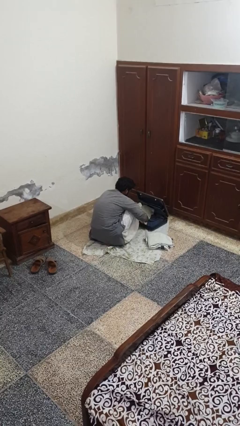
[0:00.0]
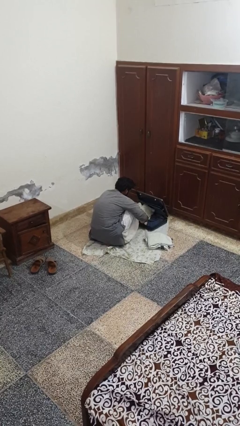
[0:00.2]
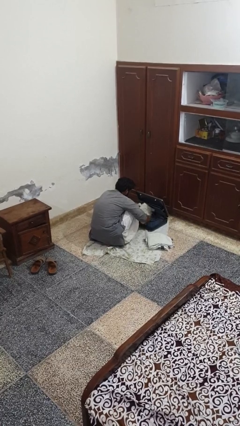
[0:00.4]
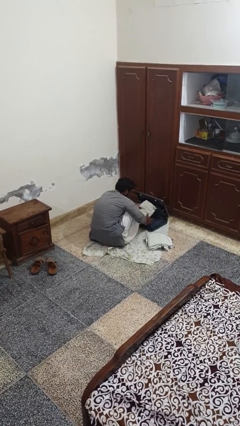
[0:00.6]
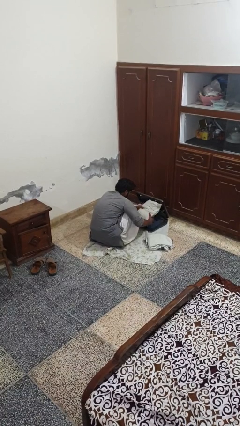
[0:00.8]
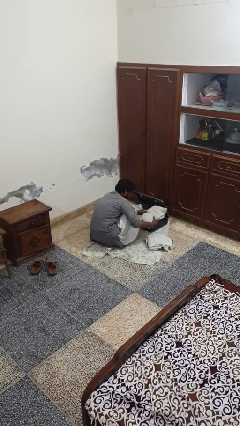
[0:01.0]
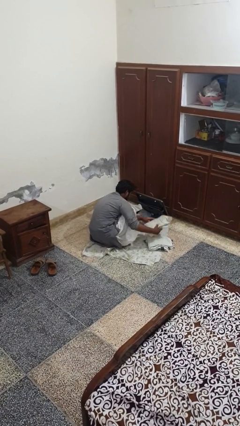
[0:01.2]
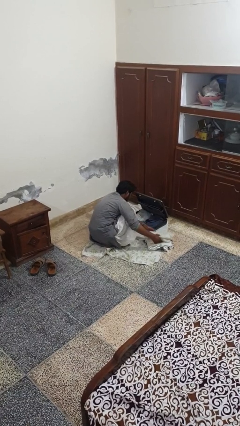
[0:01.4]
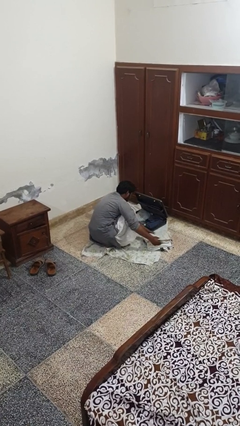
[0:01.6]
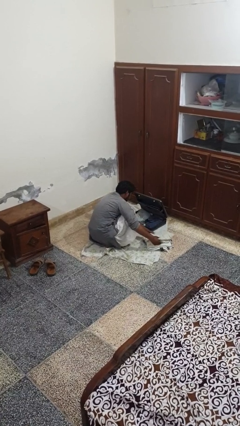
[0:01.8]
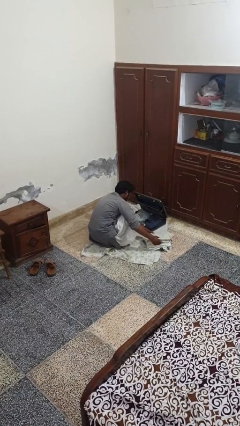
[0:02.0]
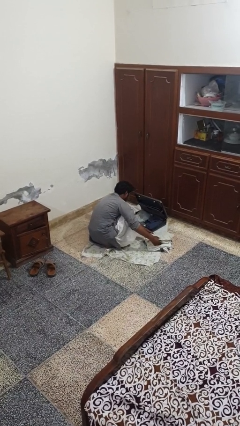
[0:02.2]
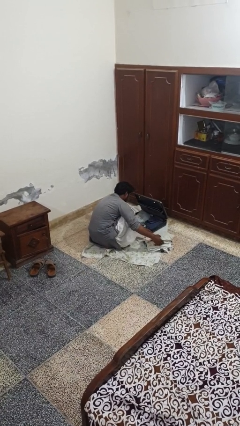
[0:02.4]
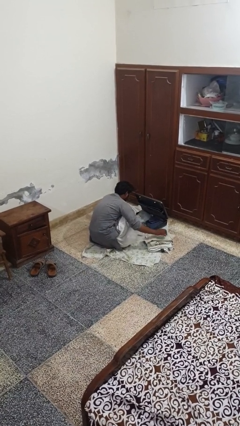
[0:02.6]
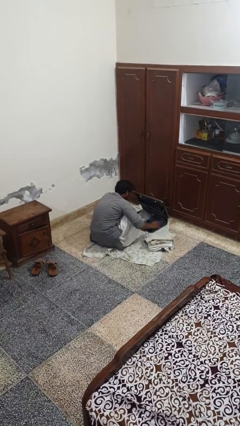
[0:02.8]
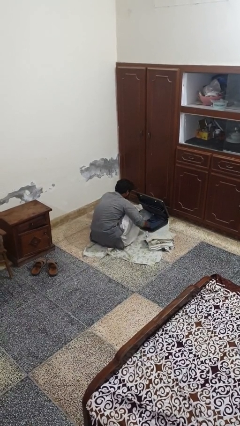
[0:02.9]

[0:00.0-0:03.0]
person unloads clothes from suitcase

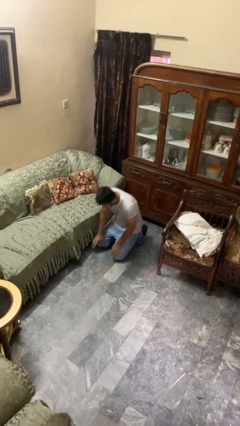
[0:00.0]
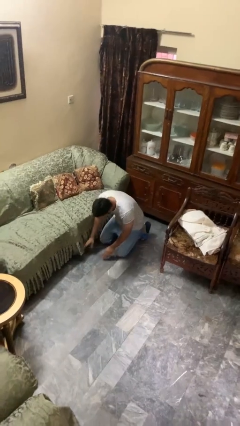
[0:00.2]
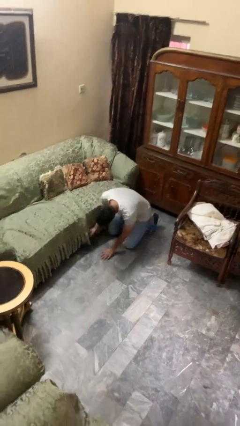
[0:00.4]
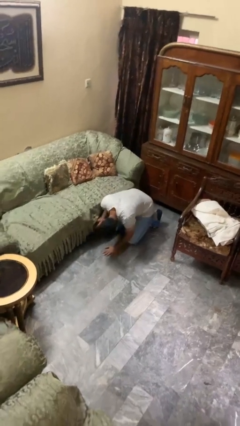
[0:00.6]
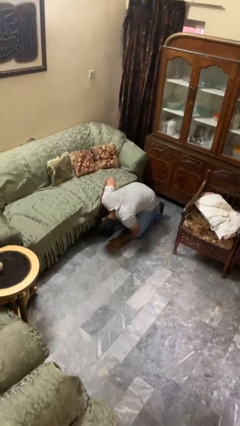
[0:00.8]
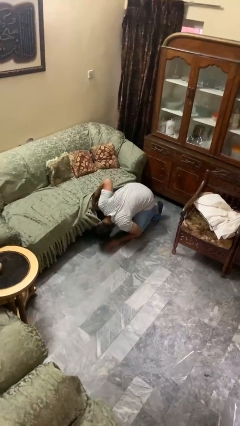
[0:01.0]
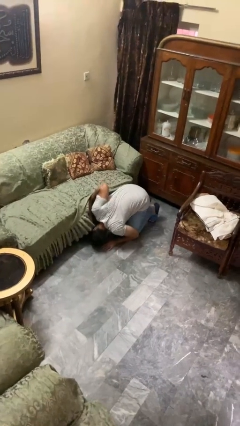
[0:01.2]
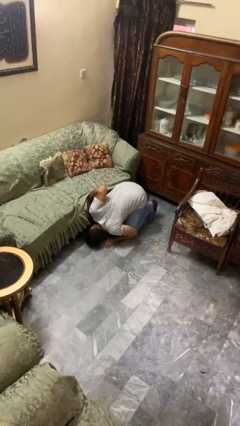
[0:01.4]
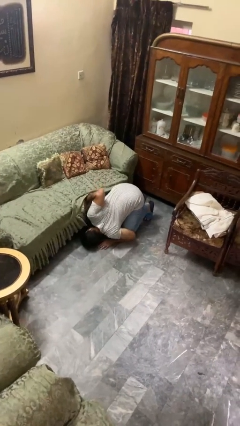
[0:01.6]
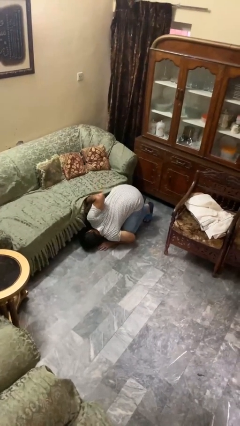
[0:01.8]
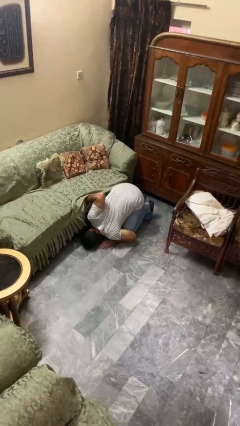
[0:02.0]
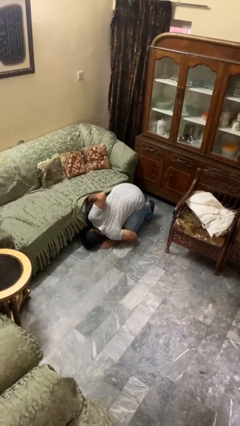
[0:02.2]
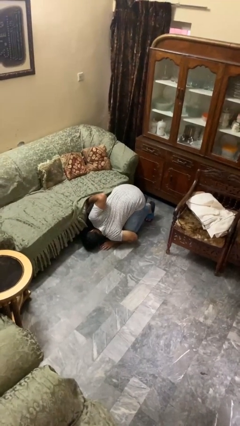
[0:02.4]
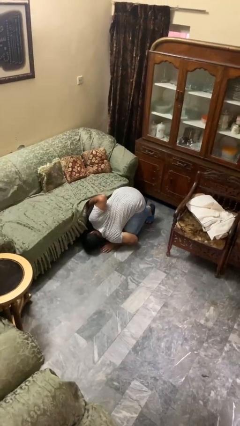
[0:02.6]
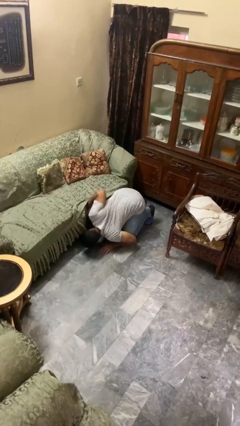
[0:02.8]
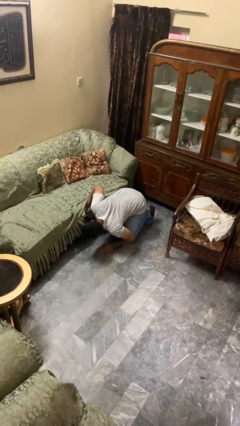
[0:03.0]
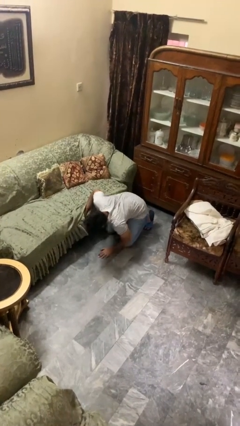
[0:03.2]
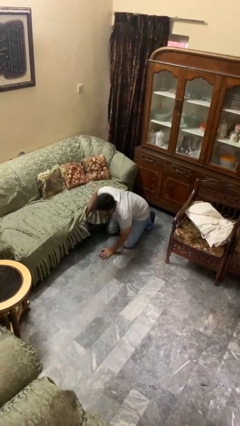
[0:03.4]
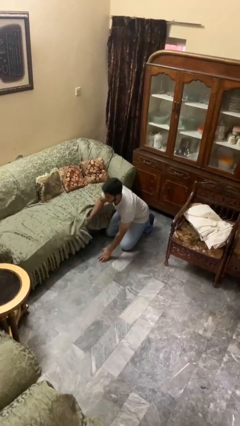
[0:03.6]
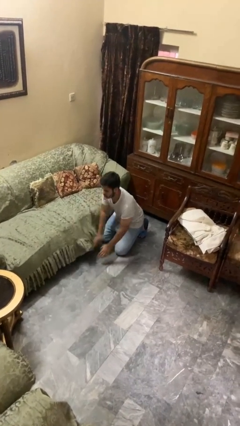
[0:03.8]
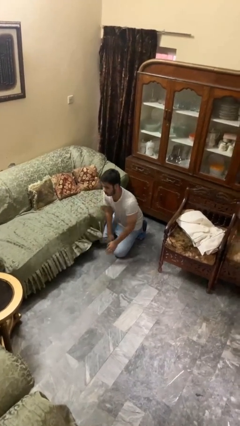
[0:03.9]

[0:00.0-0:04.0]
person searches under couch

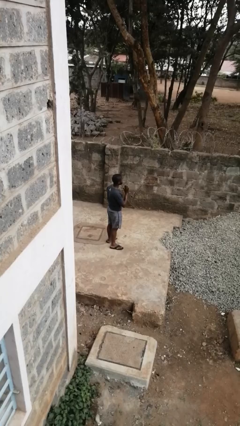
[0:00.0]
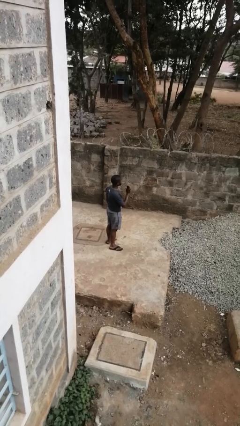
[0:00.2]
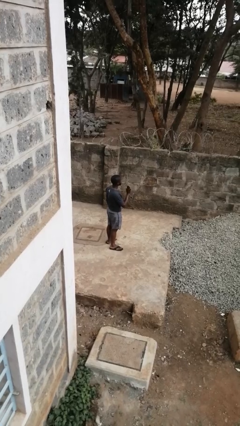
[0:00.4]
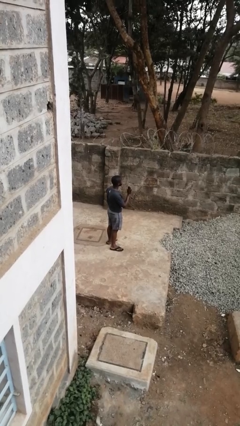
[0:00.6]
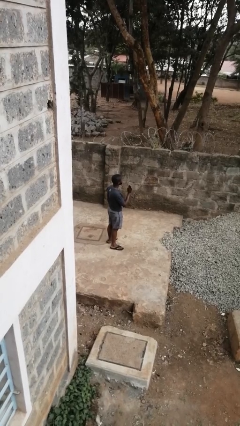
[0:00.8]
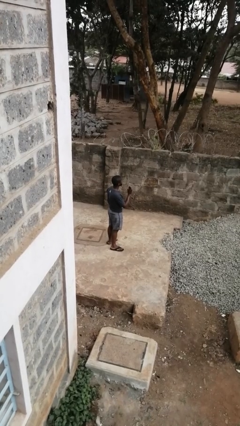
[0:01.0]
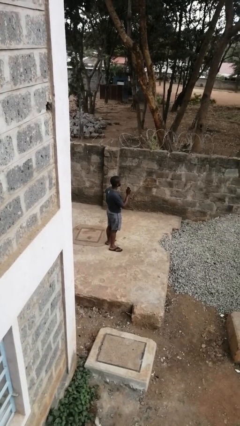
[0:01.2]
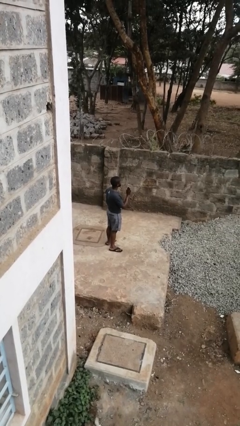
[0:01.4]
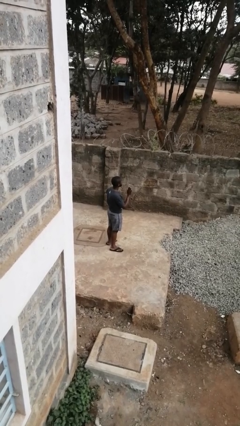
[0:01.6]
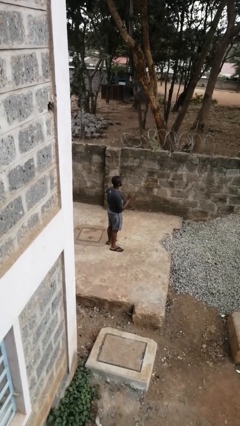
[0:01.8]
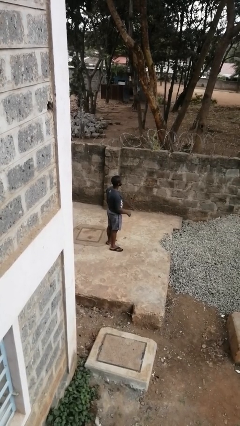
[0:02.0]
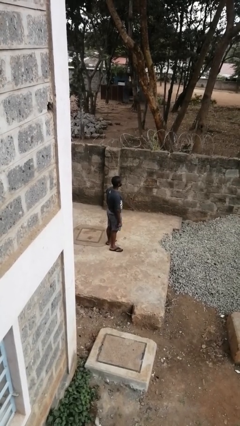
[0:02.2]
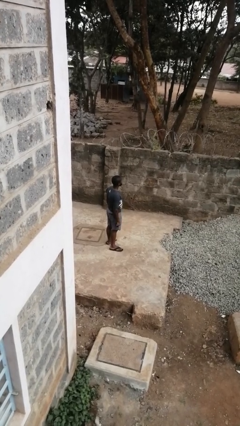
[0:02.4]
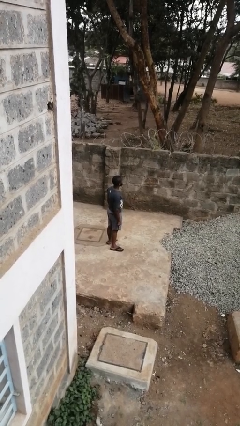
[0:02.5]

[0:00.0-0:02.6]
person gestures stop

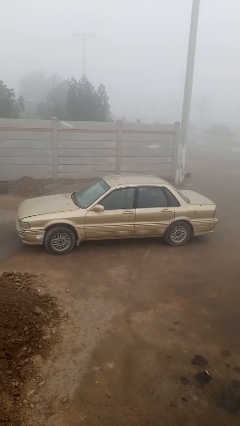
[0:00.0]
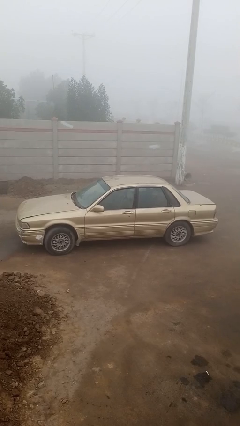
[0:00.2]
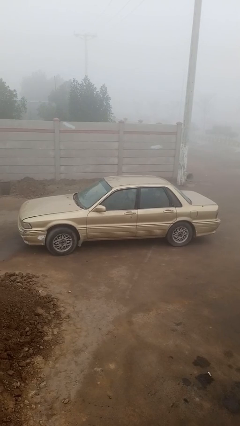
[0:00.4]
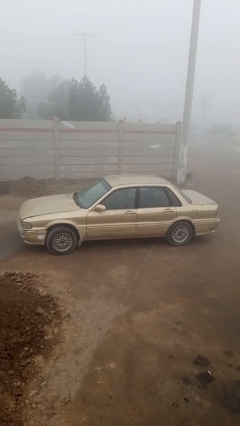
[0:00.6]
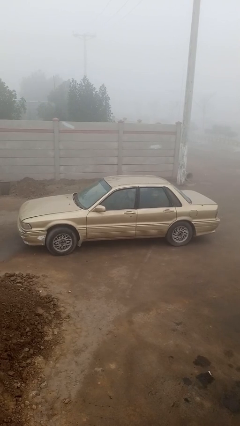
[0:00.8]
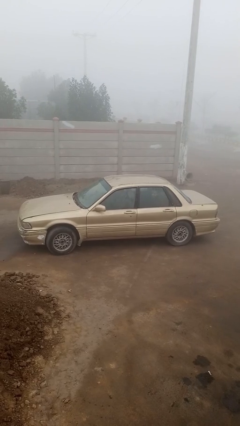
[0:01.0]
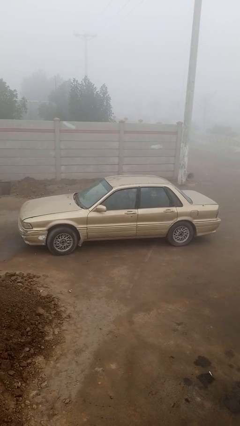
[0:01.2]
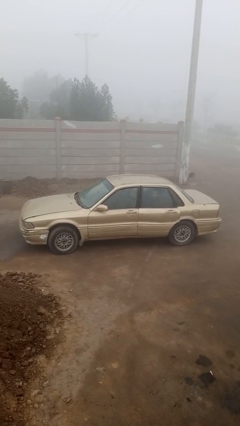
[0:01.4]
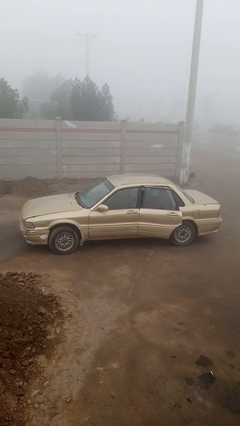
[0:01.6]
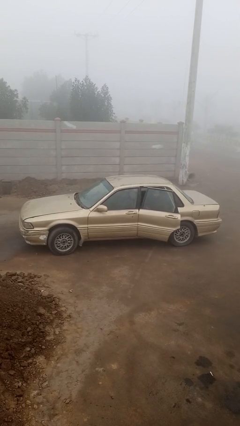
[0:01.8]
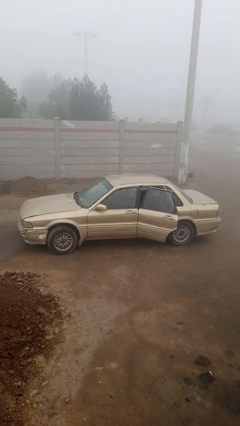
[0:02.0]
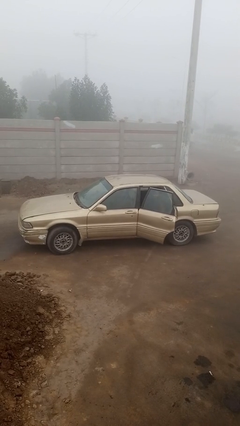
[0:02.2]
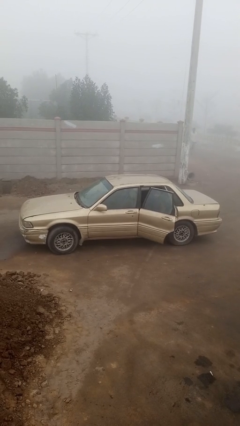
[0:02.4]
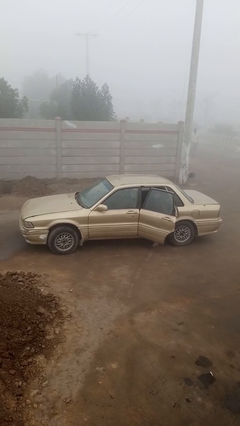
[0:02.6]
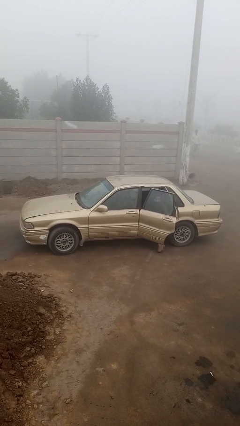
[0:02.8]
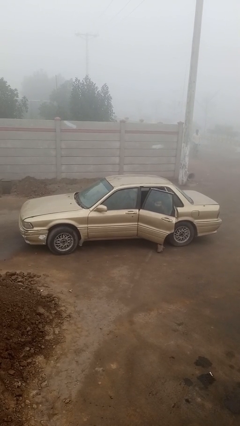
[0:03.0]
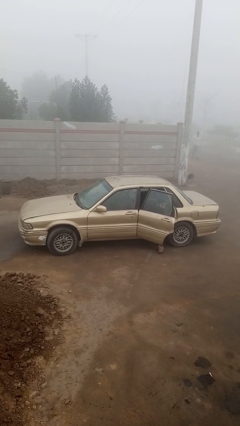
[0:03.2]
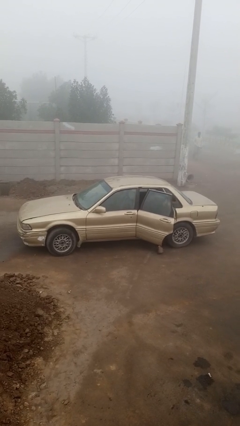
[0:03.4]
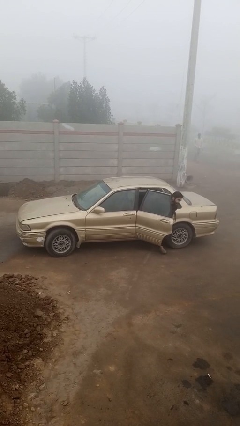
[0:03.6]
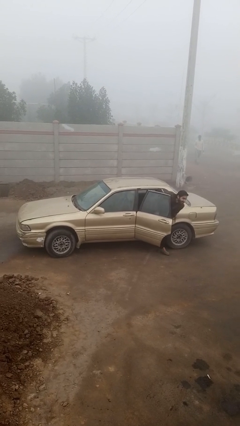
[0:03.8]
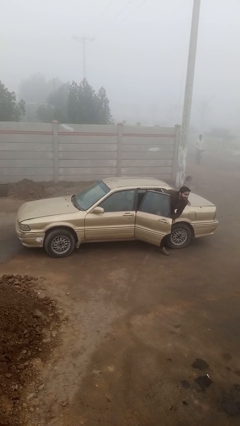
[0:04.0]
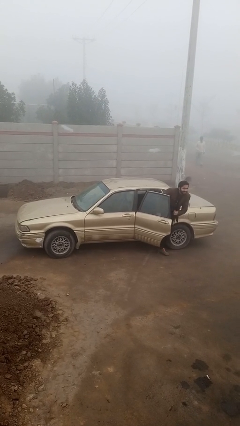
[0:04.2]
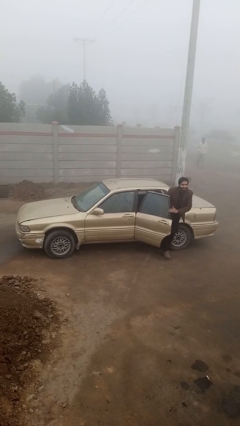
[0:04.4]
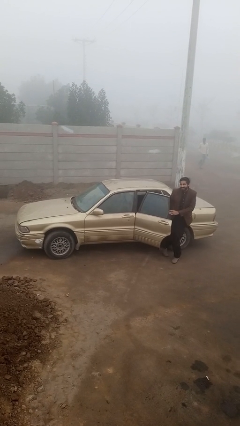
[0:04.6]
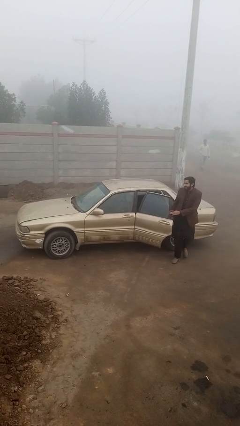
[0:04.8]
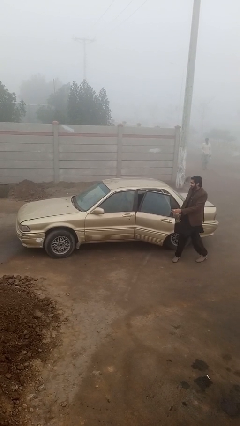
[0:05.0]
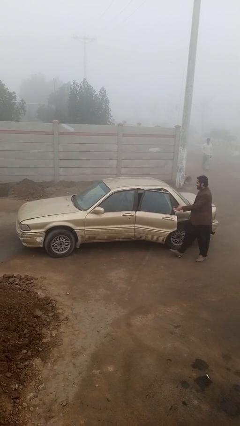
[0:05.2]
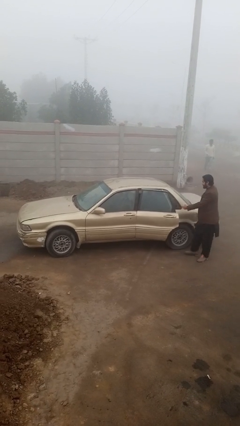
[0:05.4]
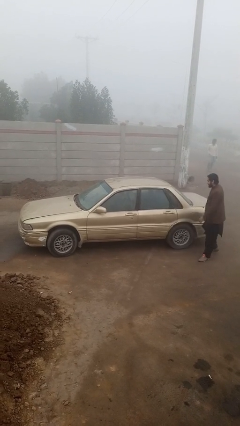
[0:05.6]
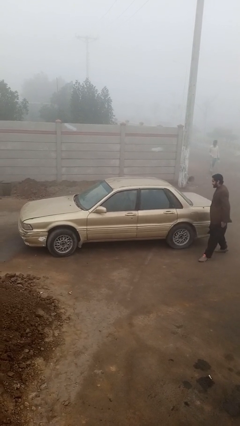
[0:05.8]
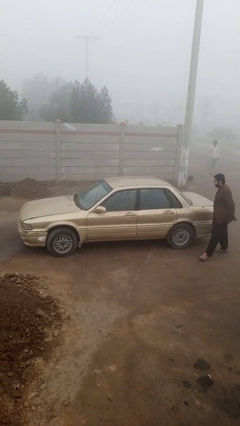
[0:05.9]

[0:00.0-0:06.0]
car drops off person

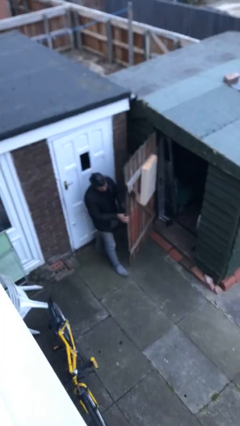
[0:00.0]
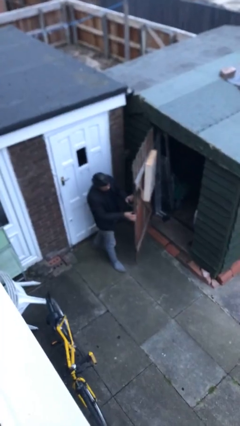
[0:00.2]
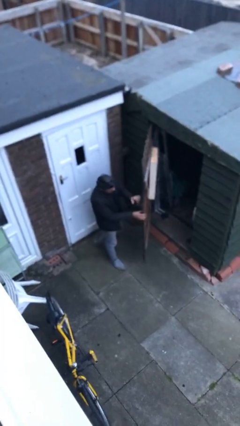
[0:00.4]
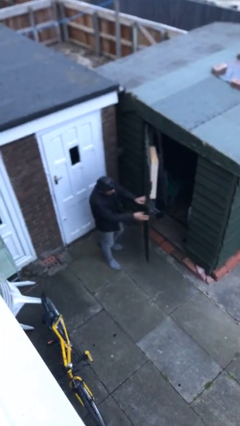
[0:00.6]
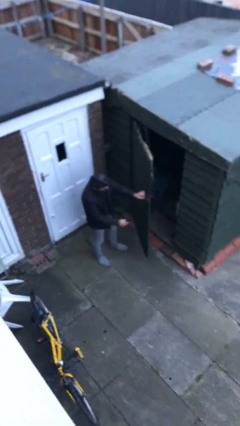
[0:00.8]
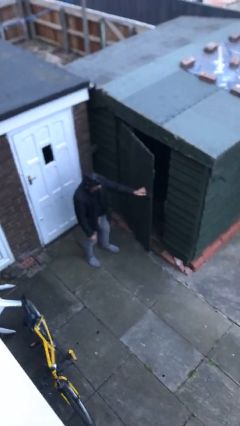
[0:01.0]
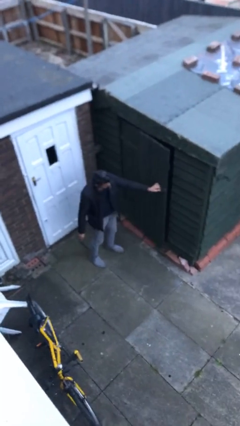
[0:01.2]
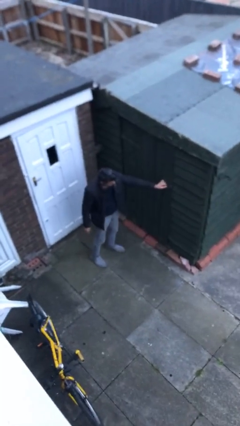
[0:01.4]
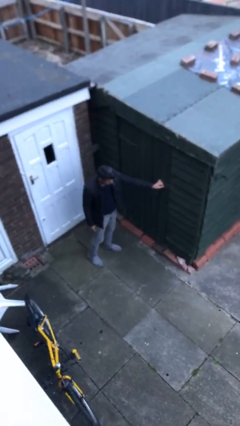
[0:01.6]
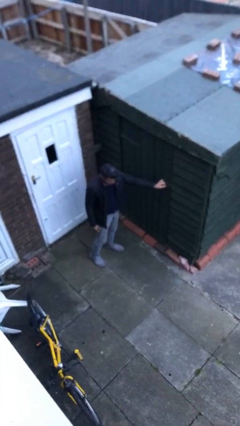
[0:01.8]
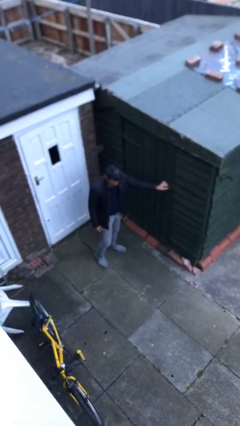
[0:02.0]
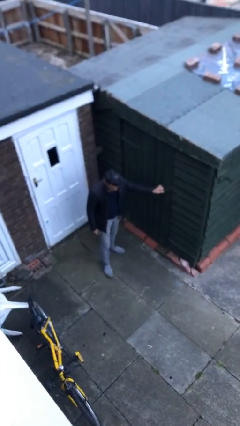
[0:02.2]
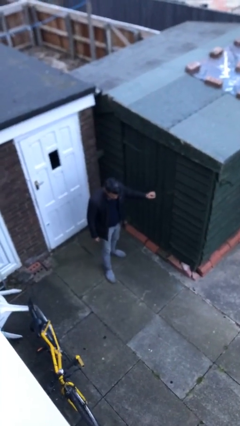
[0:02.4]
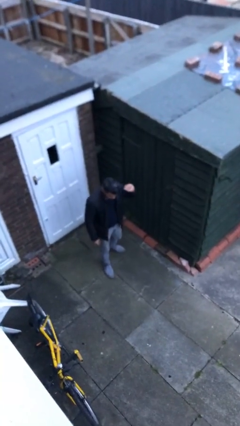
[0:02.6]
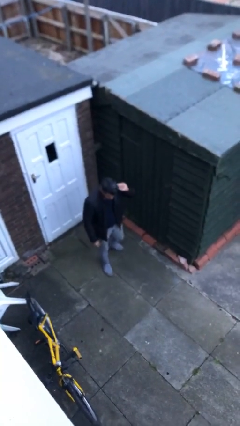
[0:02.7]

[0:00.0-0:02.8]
person closes facility door
